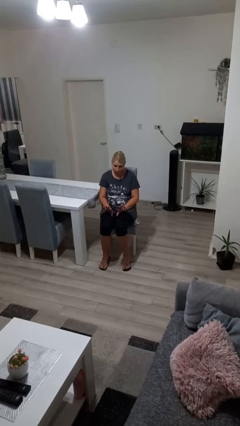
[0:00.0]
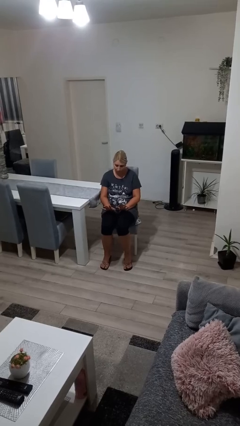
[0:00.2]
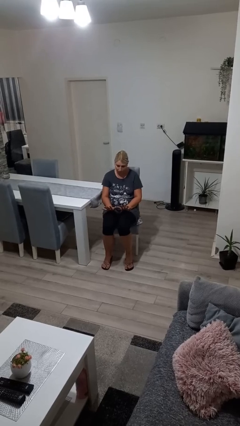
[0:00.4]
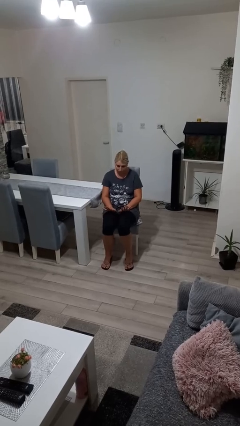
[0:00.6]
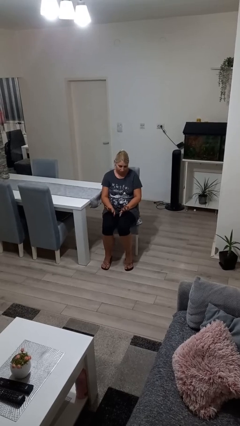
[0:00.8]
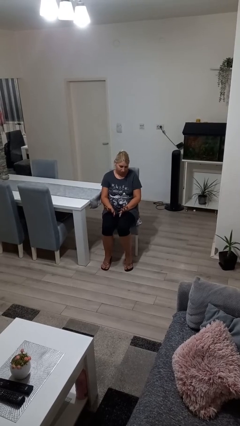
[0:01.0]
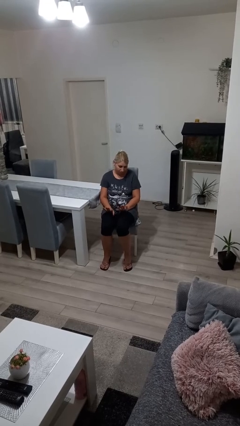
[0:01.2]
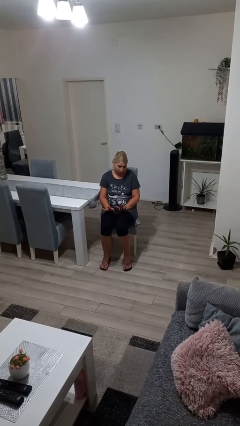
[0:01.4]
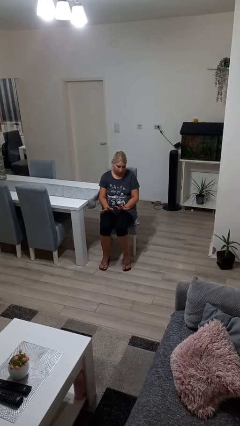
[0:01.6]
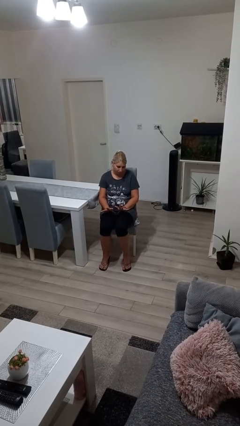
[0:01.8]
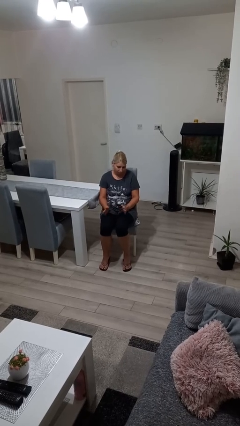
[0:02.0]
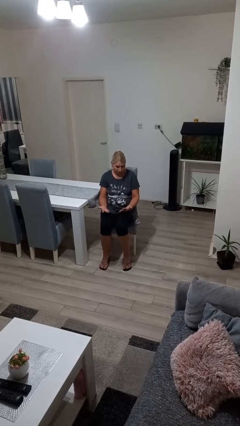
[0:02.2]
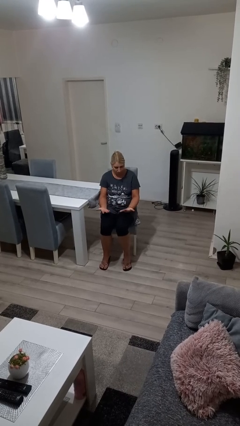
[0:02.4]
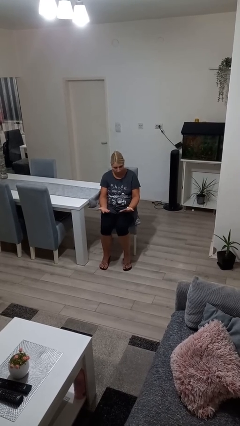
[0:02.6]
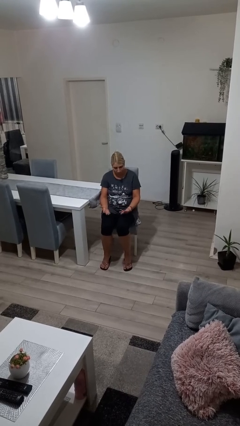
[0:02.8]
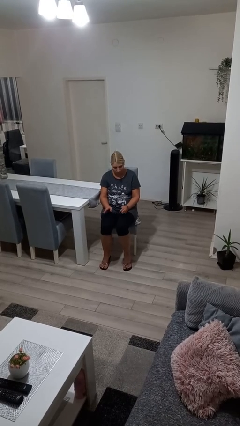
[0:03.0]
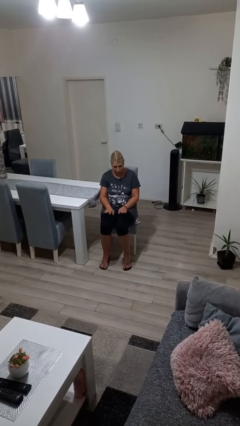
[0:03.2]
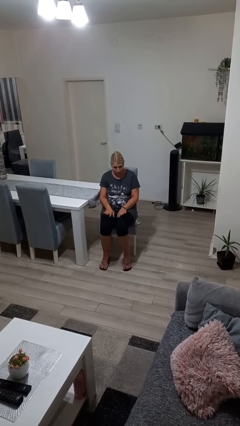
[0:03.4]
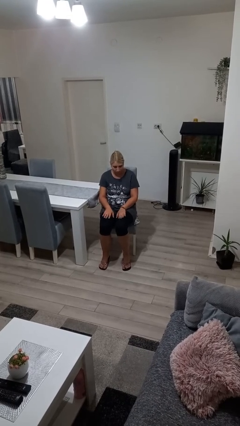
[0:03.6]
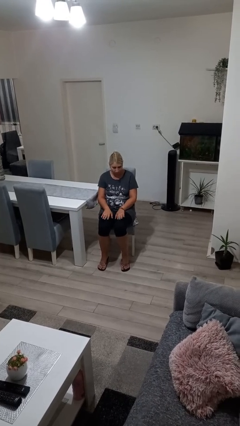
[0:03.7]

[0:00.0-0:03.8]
person looks at hands in lap

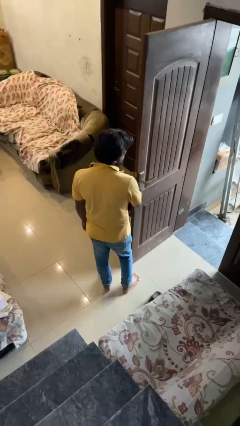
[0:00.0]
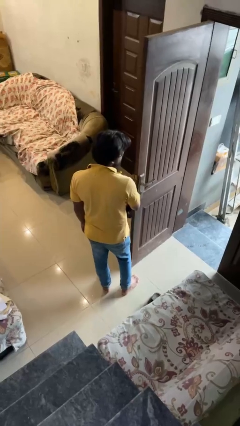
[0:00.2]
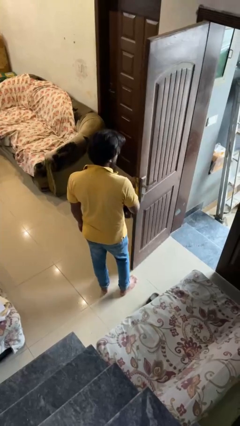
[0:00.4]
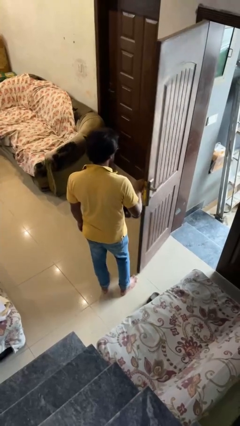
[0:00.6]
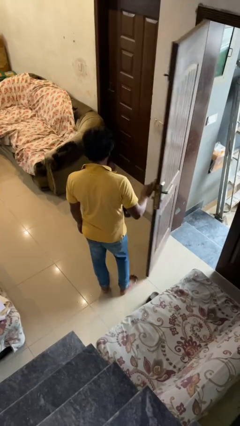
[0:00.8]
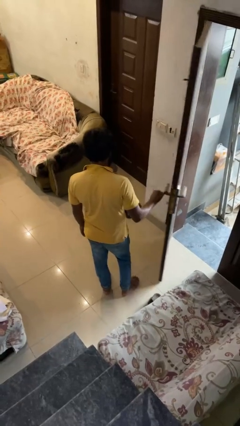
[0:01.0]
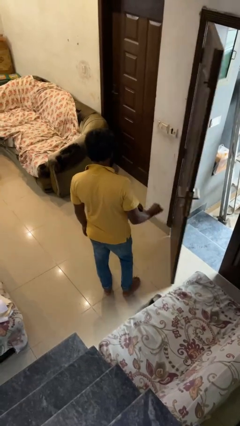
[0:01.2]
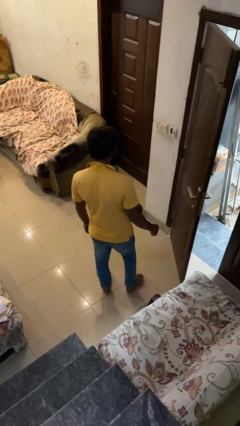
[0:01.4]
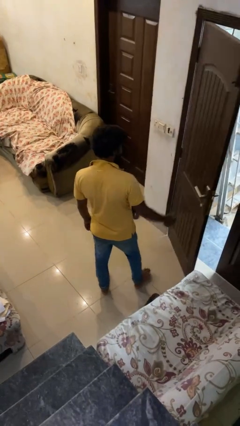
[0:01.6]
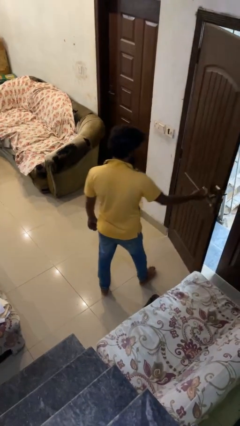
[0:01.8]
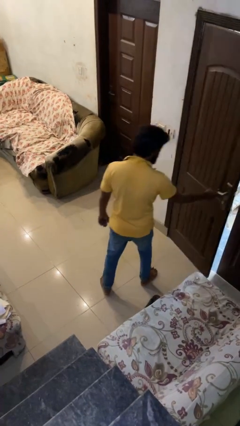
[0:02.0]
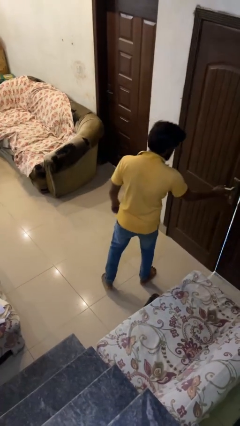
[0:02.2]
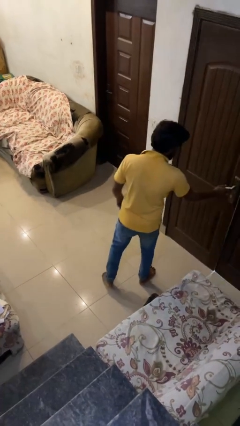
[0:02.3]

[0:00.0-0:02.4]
person closes facility door

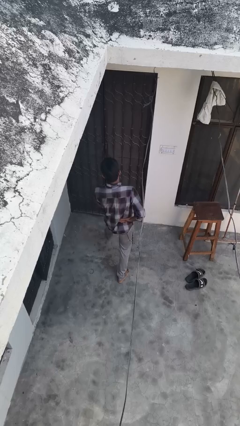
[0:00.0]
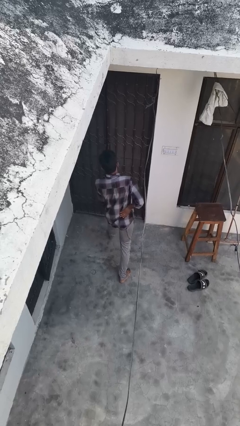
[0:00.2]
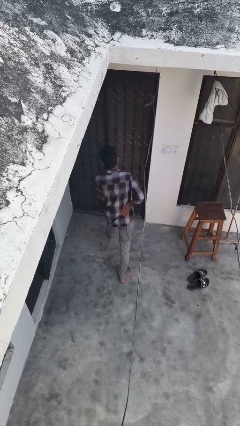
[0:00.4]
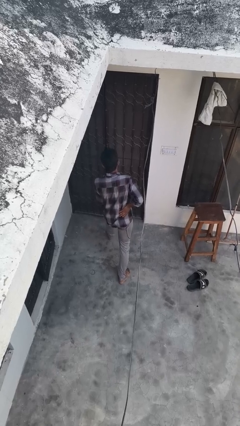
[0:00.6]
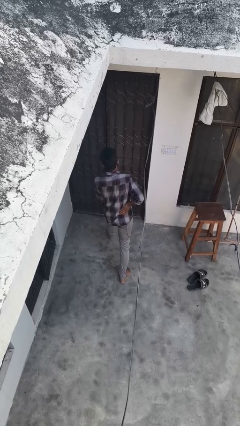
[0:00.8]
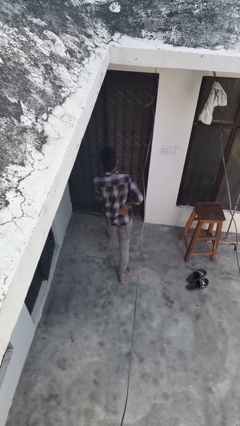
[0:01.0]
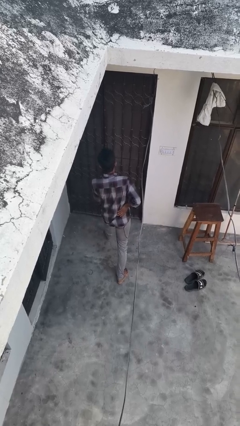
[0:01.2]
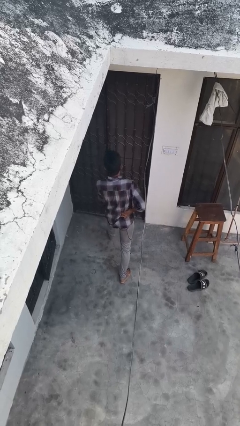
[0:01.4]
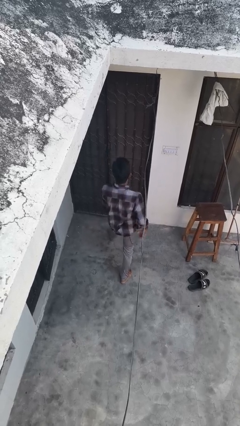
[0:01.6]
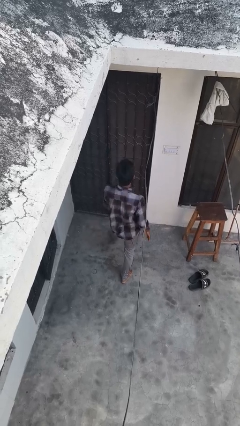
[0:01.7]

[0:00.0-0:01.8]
person exercises with lunges

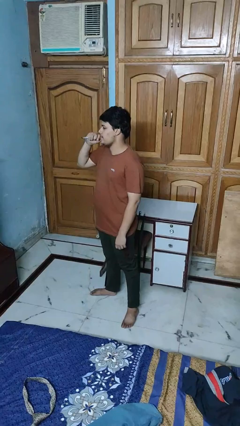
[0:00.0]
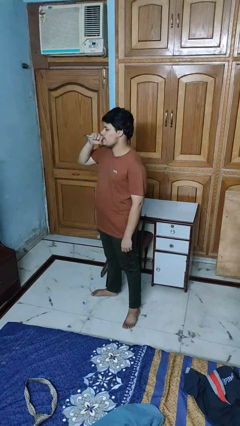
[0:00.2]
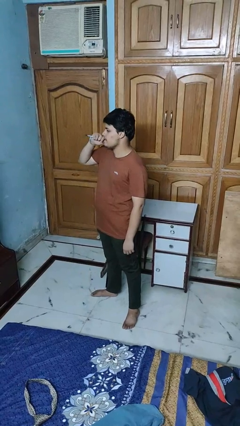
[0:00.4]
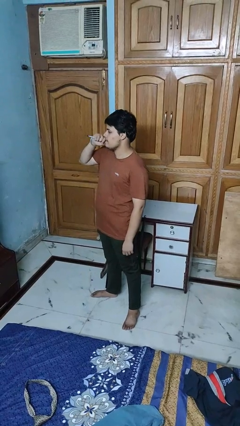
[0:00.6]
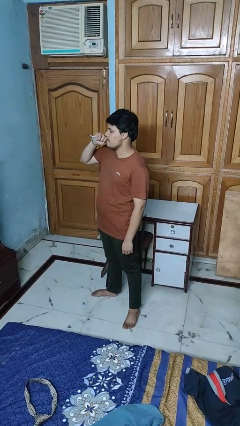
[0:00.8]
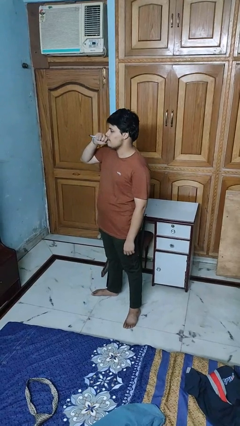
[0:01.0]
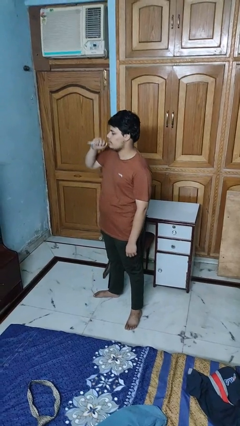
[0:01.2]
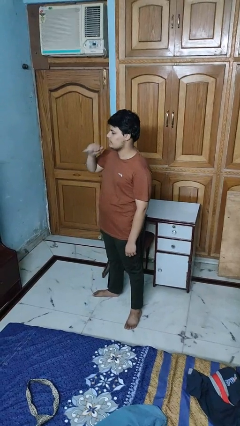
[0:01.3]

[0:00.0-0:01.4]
person vapes

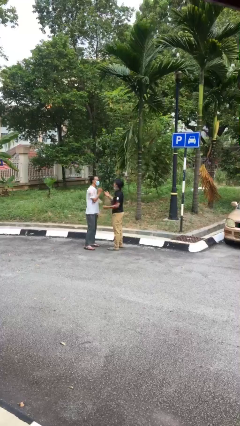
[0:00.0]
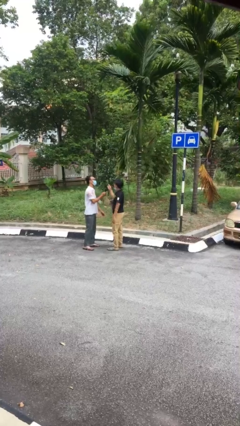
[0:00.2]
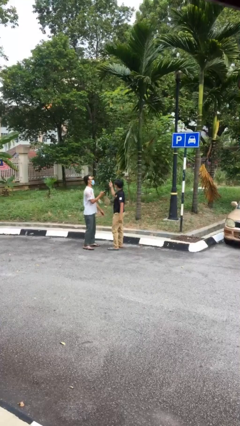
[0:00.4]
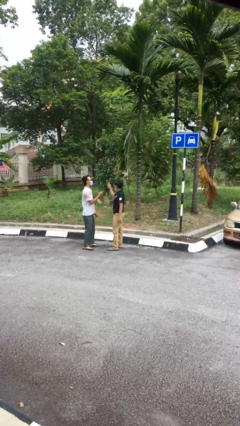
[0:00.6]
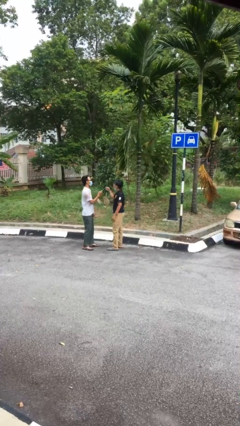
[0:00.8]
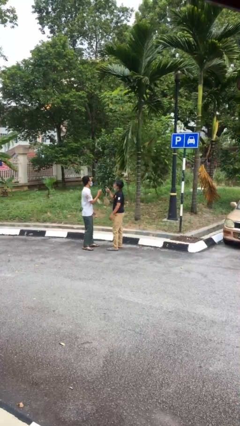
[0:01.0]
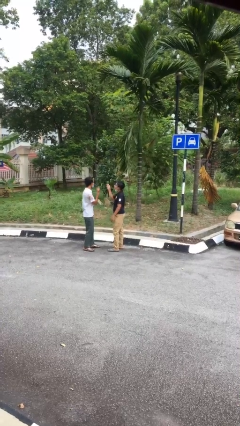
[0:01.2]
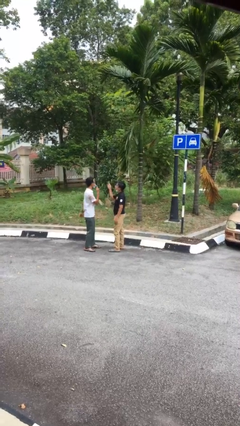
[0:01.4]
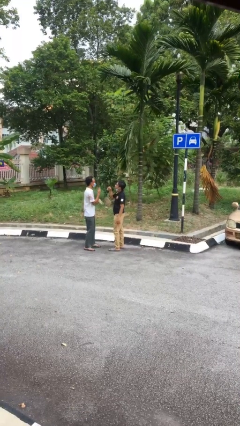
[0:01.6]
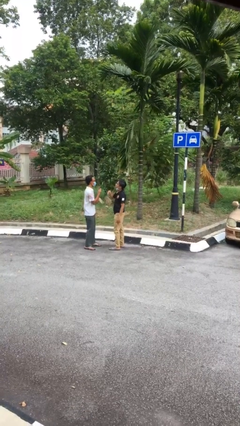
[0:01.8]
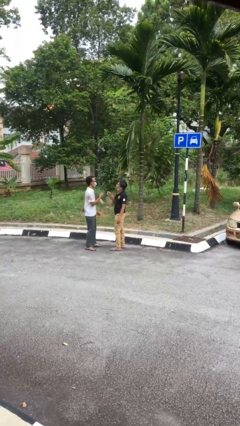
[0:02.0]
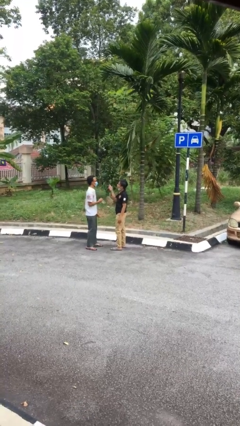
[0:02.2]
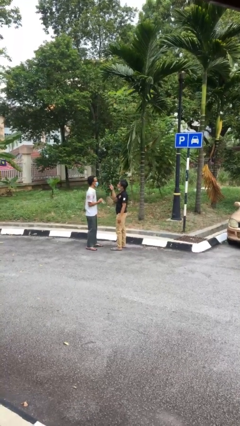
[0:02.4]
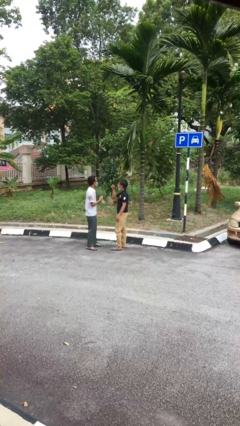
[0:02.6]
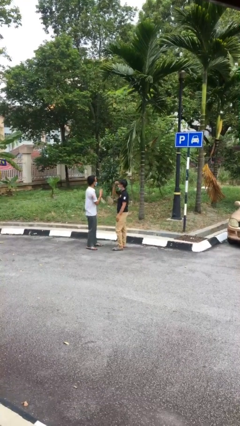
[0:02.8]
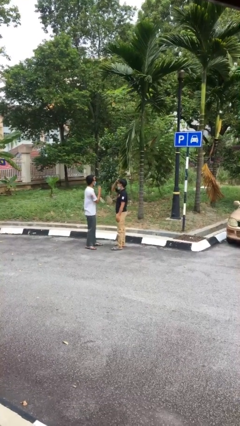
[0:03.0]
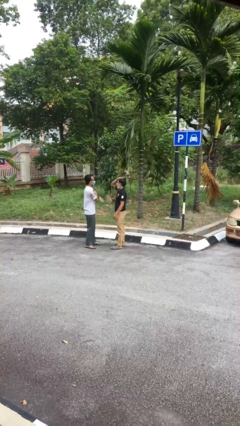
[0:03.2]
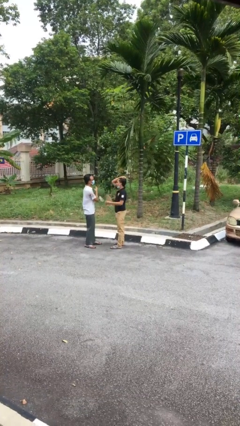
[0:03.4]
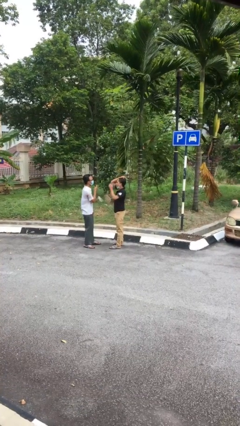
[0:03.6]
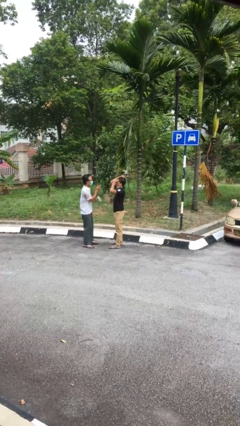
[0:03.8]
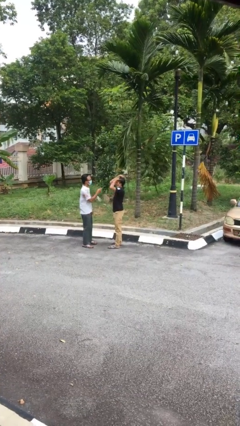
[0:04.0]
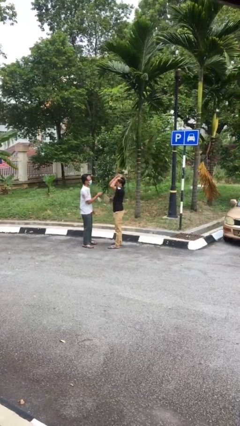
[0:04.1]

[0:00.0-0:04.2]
person talks to person

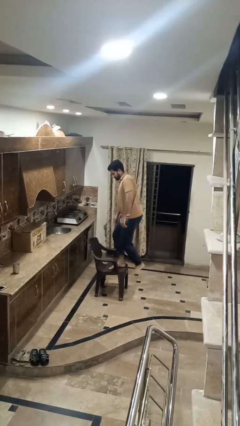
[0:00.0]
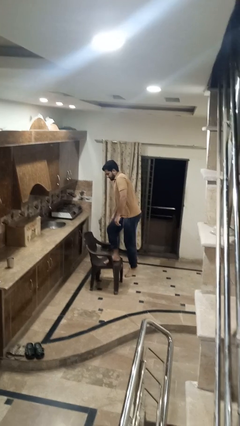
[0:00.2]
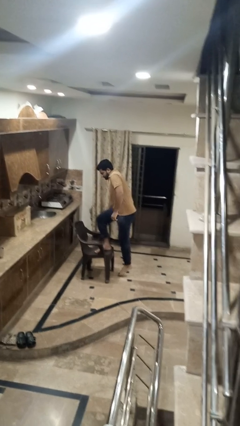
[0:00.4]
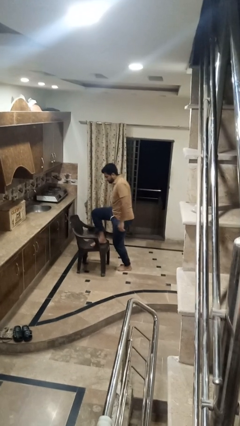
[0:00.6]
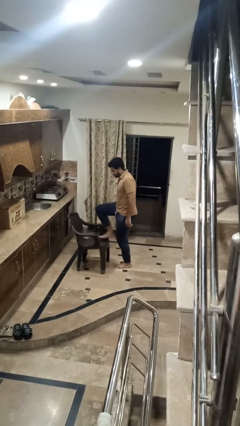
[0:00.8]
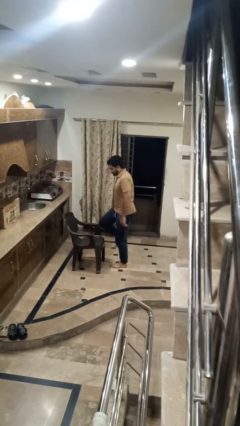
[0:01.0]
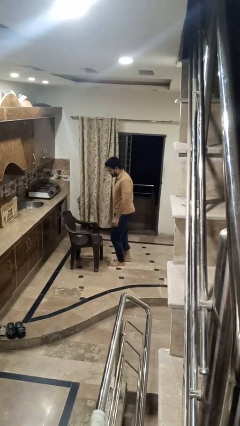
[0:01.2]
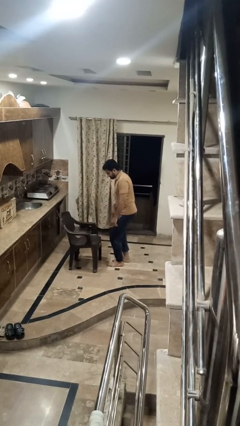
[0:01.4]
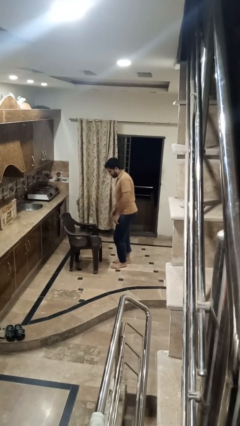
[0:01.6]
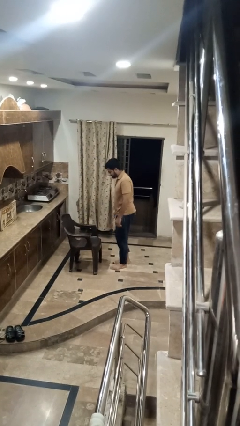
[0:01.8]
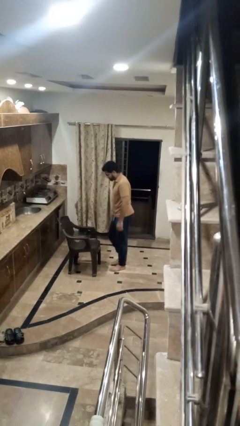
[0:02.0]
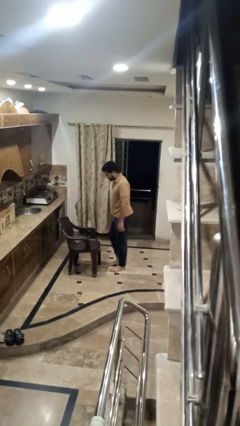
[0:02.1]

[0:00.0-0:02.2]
person climbs off chair

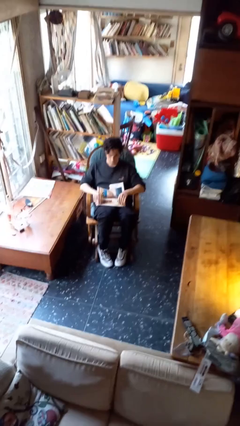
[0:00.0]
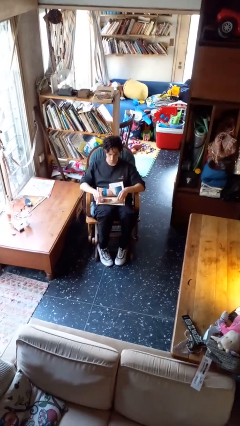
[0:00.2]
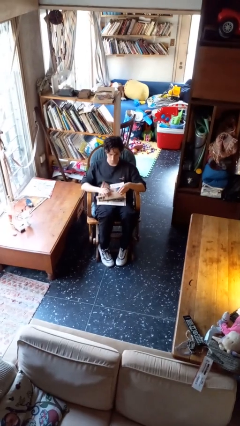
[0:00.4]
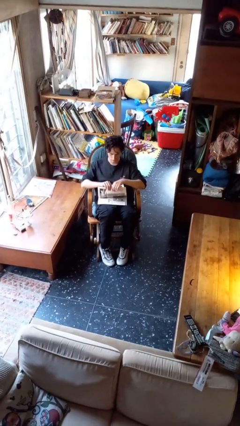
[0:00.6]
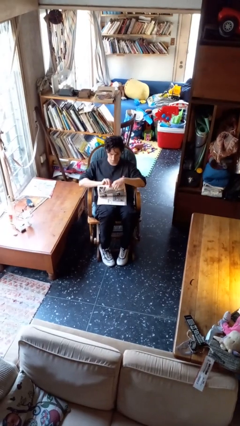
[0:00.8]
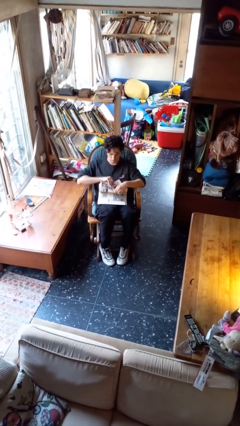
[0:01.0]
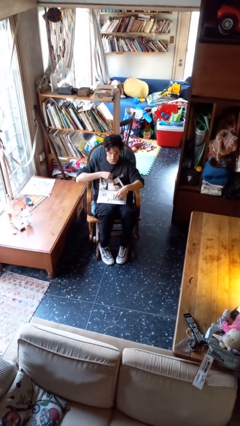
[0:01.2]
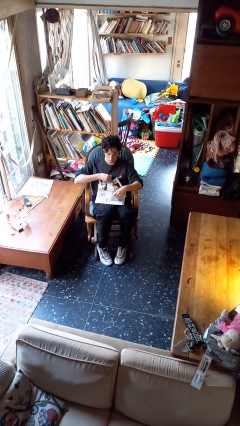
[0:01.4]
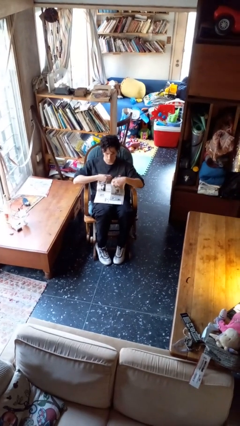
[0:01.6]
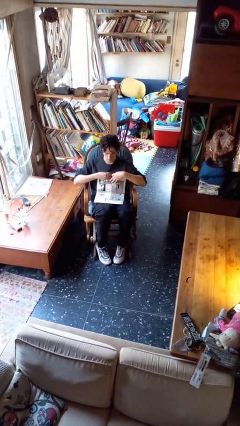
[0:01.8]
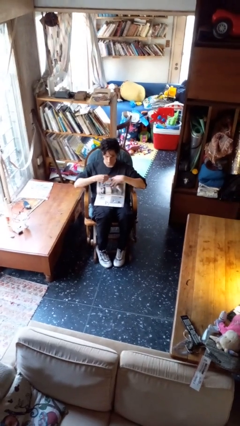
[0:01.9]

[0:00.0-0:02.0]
person tears paper
